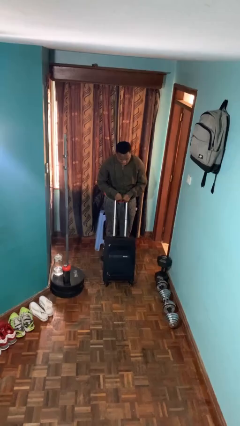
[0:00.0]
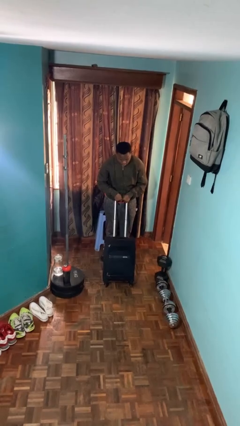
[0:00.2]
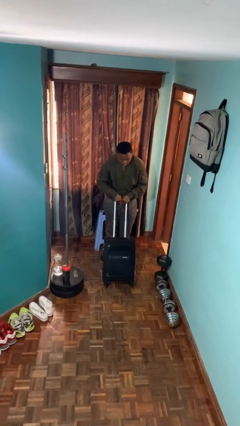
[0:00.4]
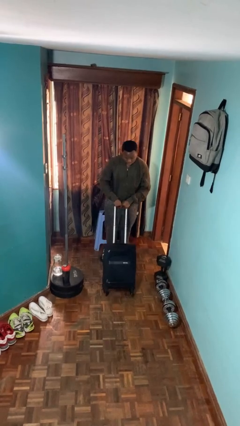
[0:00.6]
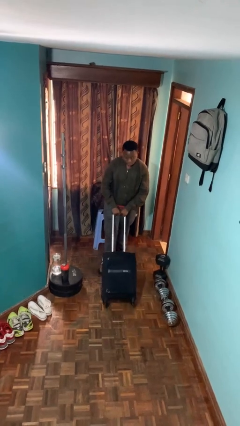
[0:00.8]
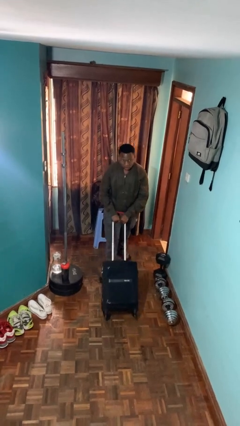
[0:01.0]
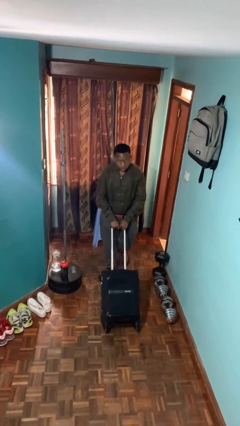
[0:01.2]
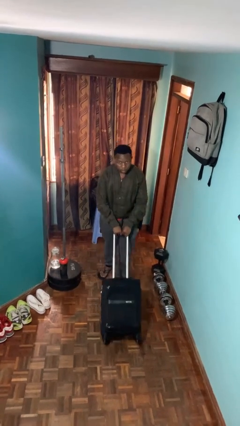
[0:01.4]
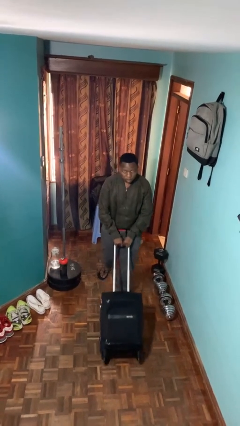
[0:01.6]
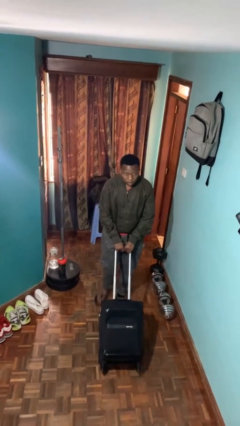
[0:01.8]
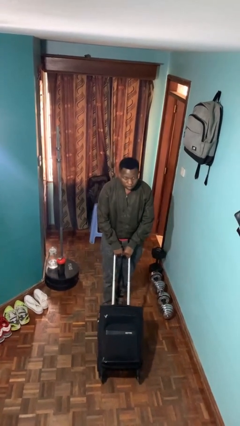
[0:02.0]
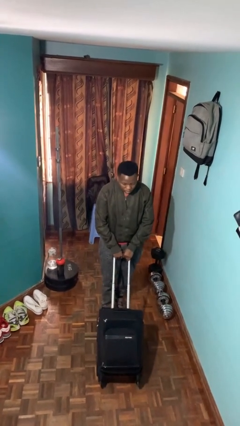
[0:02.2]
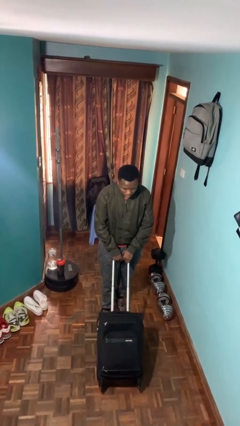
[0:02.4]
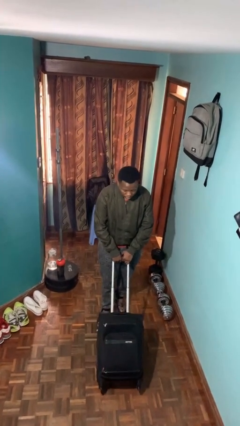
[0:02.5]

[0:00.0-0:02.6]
person pushes wheeled cart

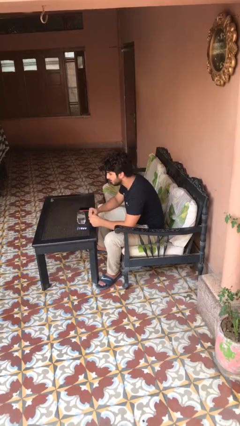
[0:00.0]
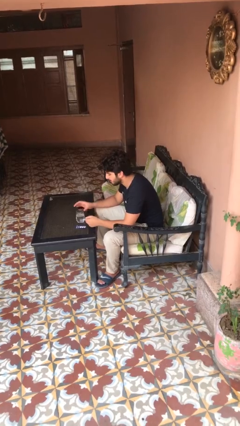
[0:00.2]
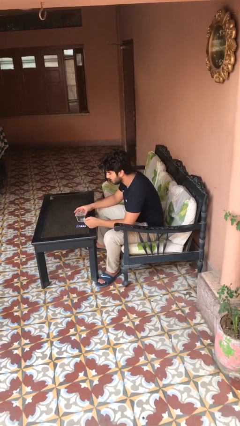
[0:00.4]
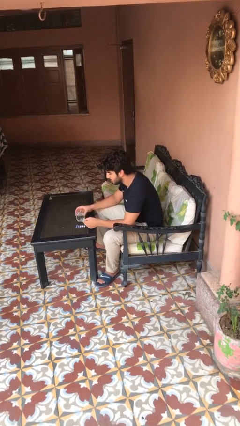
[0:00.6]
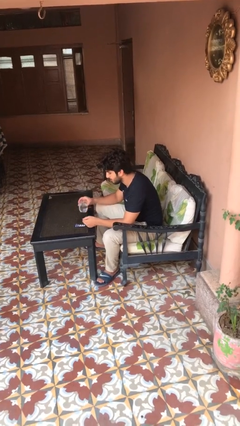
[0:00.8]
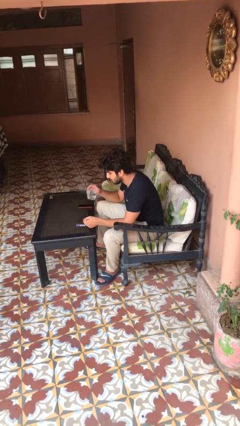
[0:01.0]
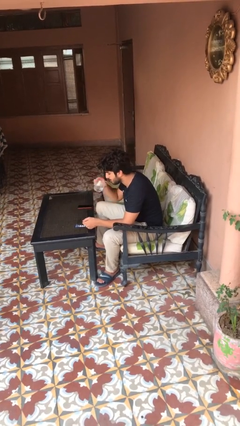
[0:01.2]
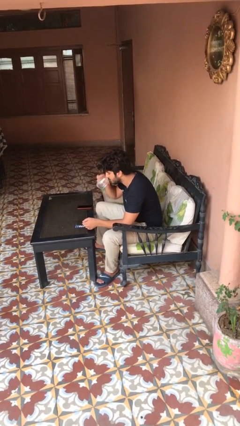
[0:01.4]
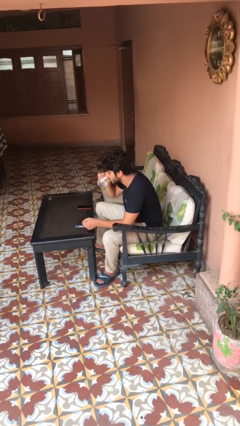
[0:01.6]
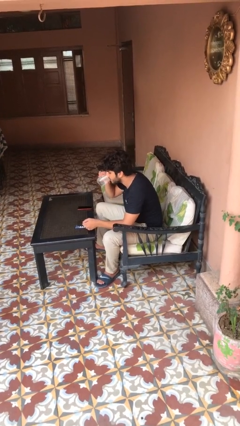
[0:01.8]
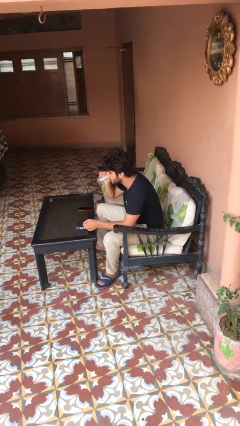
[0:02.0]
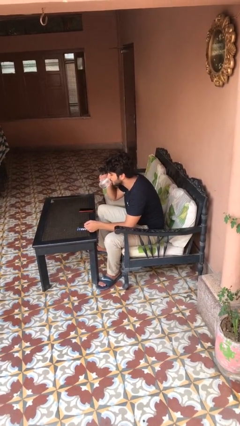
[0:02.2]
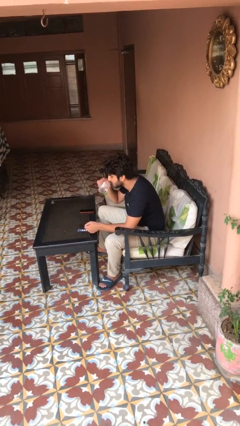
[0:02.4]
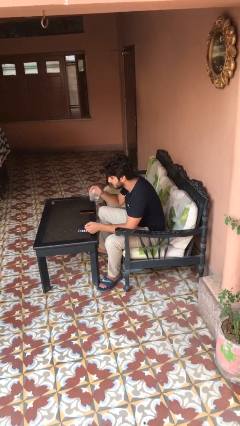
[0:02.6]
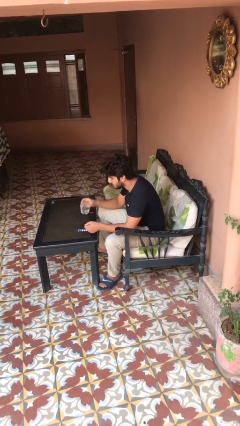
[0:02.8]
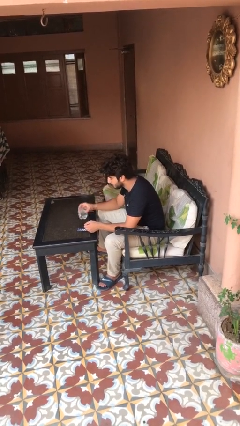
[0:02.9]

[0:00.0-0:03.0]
person drinks from cup

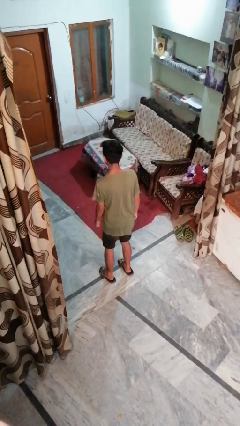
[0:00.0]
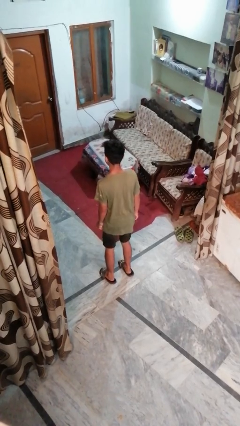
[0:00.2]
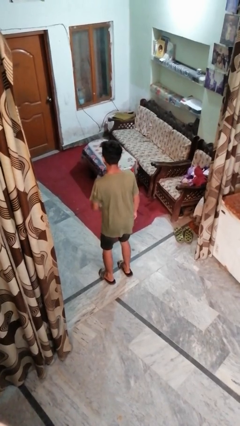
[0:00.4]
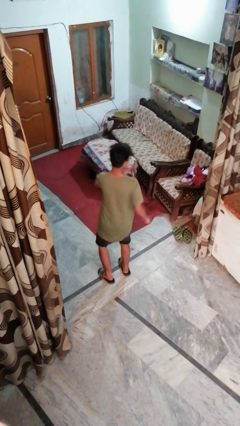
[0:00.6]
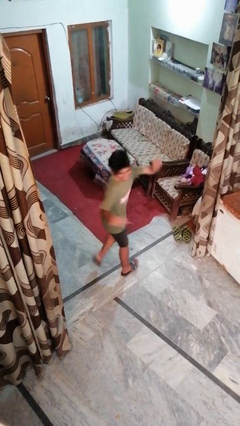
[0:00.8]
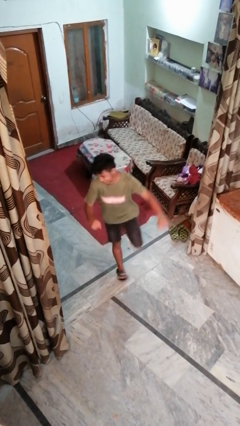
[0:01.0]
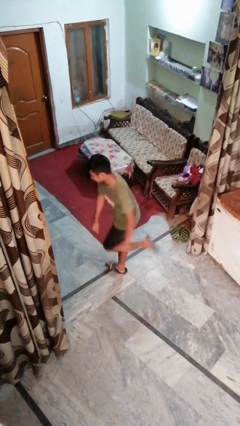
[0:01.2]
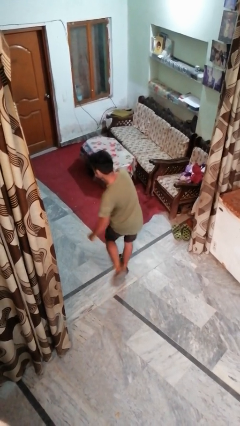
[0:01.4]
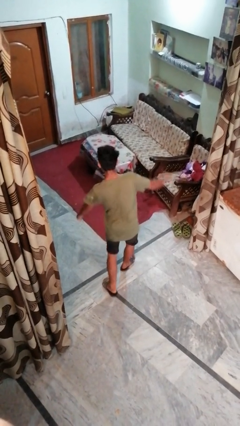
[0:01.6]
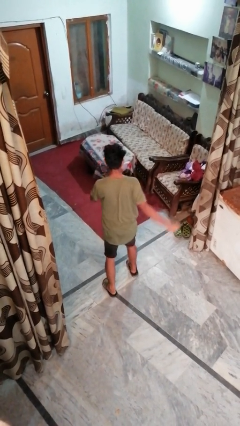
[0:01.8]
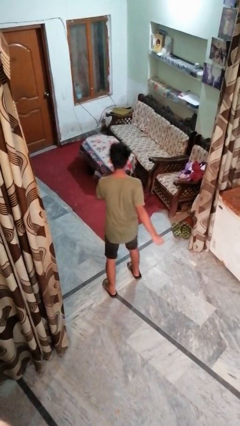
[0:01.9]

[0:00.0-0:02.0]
person twirls

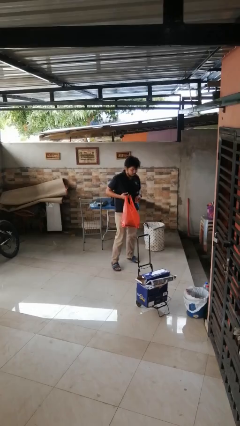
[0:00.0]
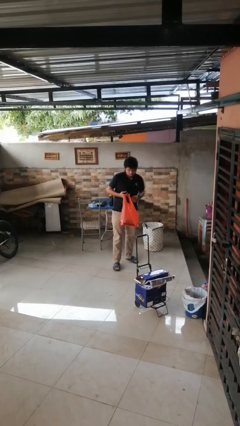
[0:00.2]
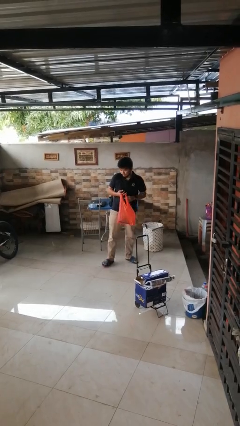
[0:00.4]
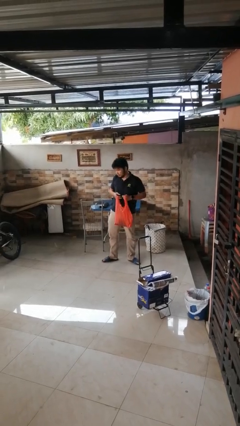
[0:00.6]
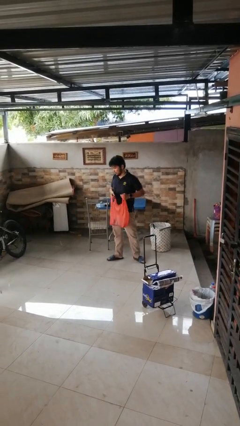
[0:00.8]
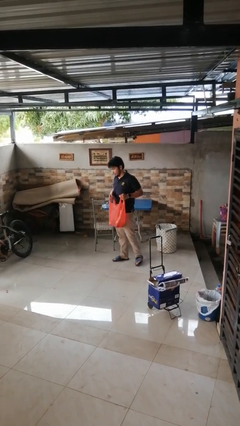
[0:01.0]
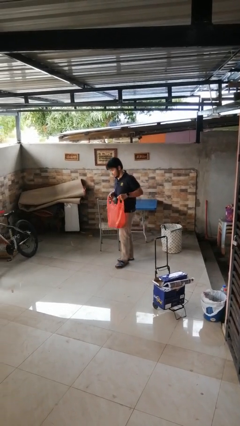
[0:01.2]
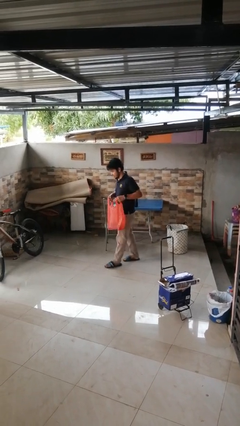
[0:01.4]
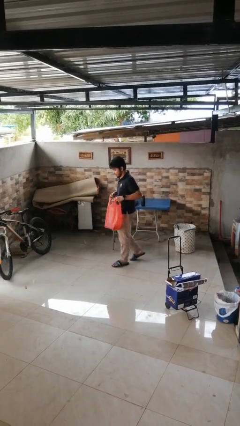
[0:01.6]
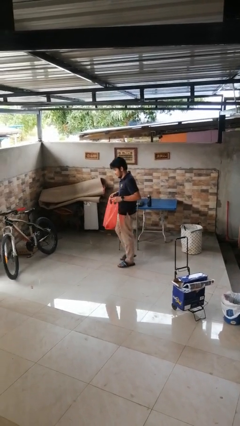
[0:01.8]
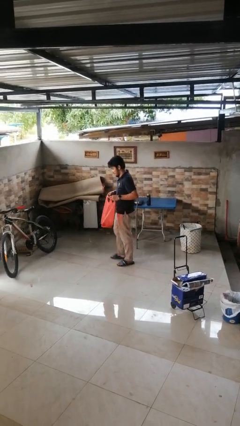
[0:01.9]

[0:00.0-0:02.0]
person carries groceries

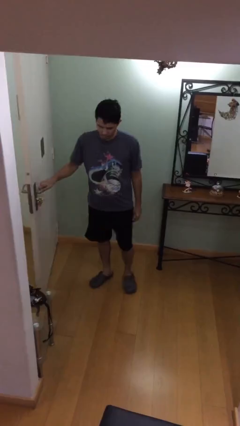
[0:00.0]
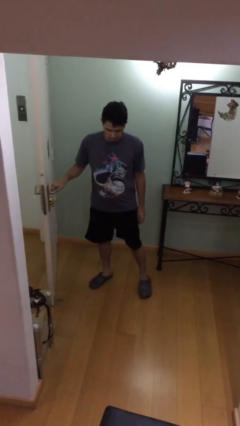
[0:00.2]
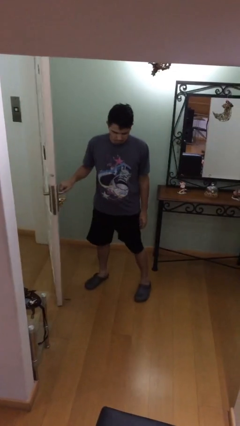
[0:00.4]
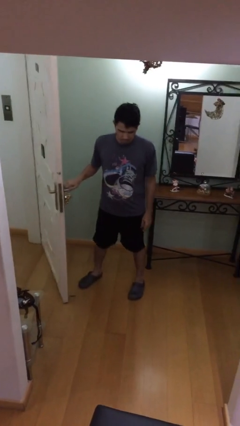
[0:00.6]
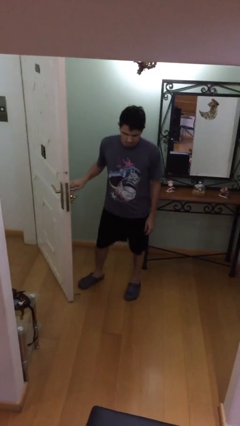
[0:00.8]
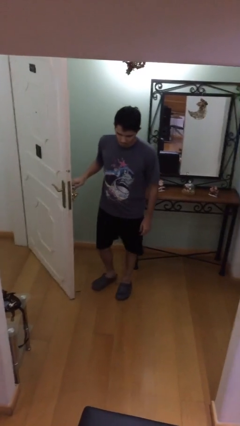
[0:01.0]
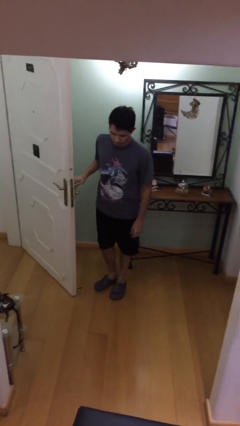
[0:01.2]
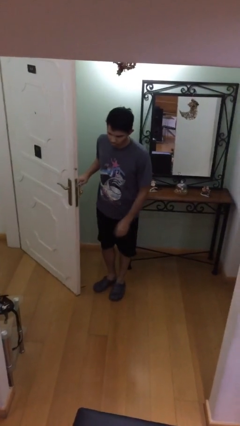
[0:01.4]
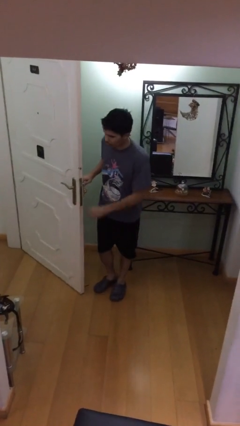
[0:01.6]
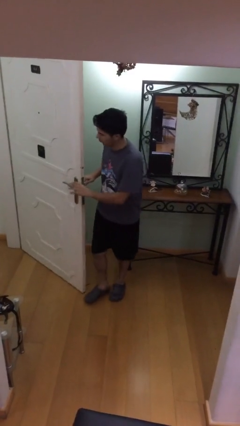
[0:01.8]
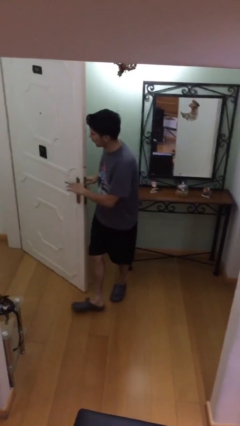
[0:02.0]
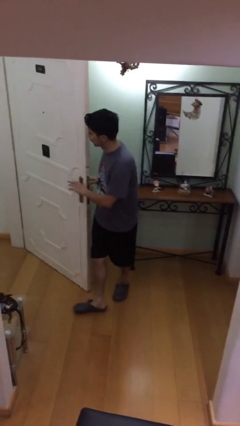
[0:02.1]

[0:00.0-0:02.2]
person opens facility door

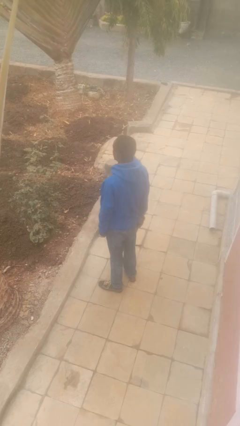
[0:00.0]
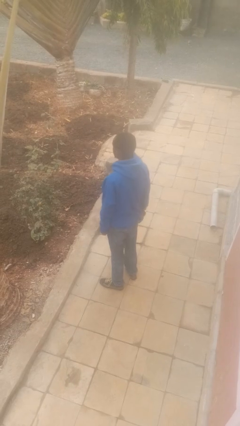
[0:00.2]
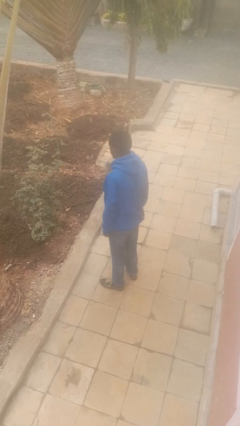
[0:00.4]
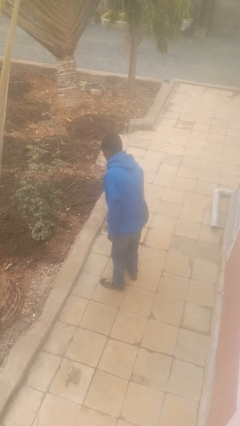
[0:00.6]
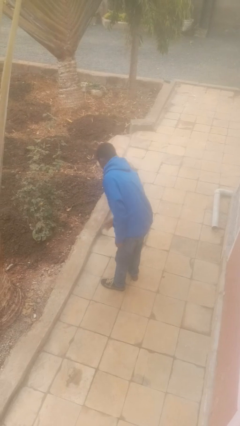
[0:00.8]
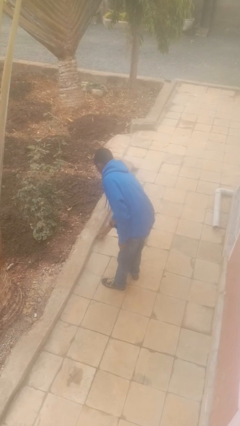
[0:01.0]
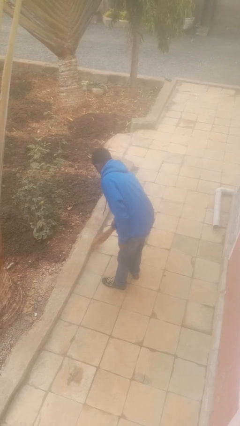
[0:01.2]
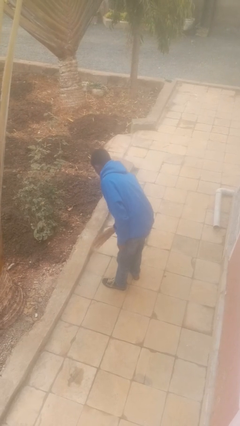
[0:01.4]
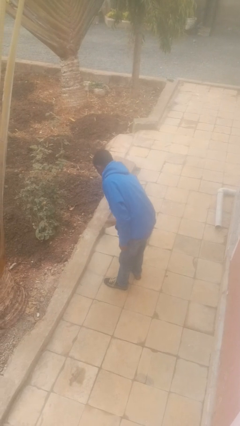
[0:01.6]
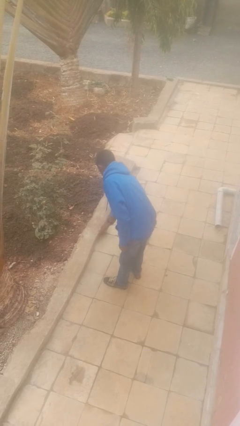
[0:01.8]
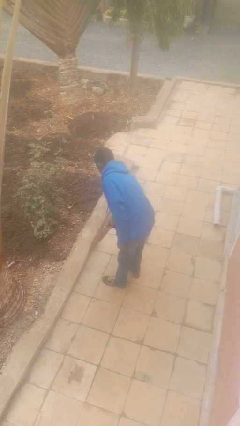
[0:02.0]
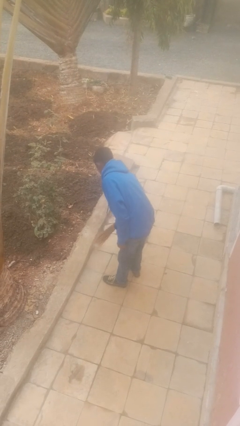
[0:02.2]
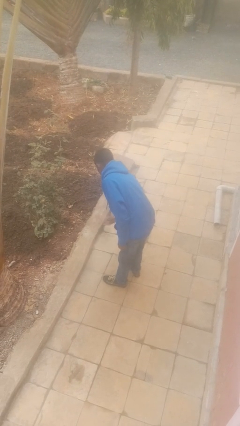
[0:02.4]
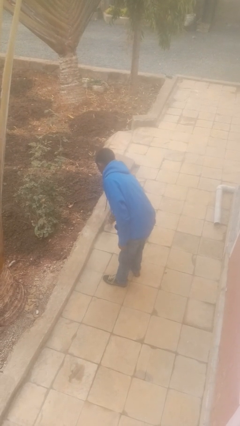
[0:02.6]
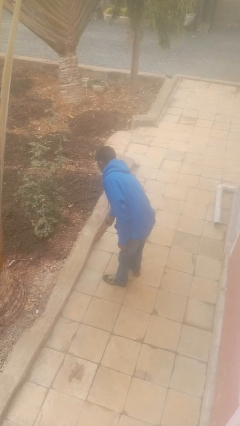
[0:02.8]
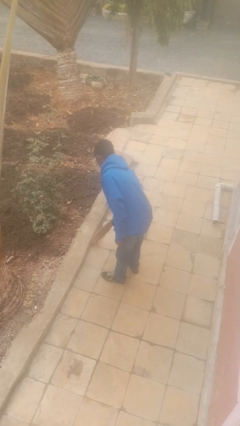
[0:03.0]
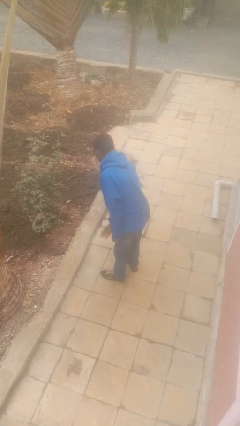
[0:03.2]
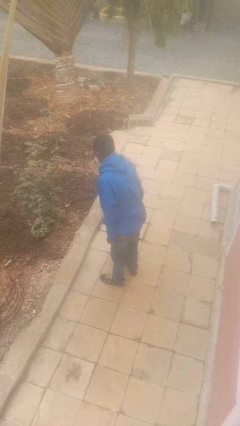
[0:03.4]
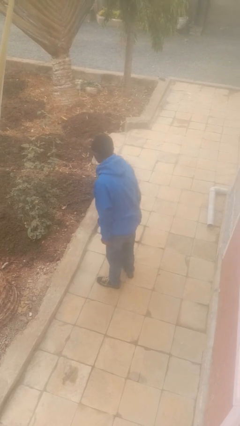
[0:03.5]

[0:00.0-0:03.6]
person sweeps floor

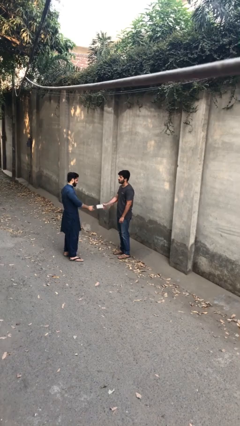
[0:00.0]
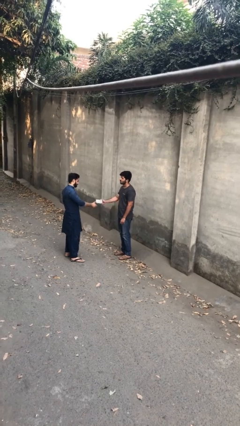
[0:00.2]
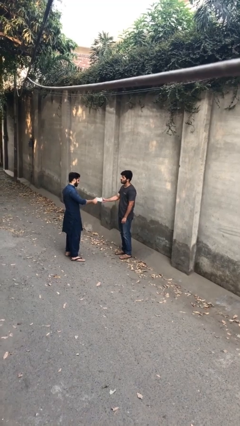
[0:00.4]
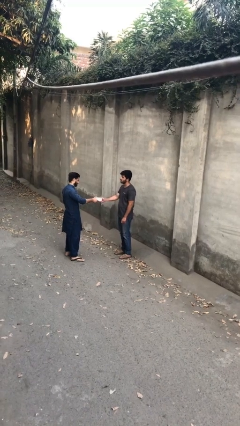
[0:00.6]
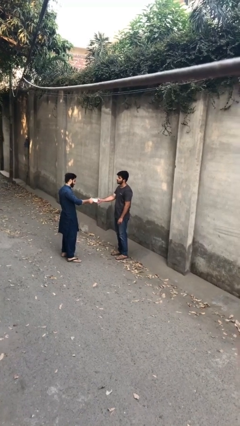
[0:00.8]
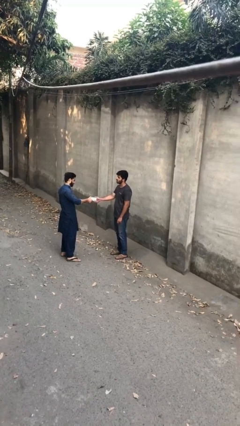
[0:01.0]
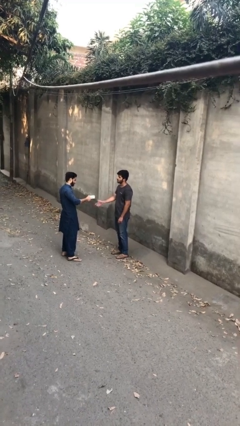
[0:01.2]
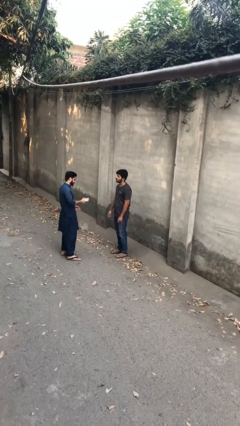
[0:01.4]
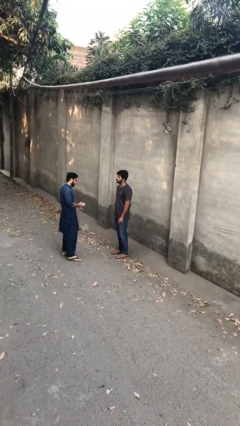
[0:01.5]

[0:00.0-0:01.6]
person transfers object to person

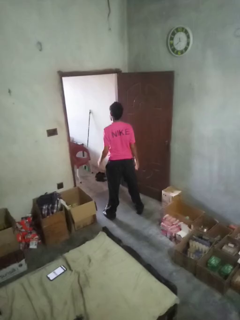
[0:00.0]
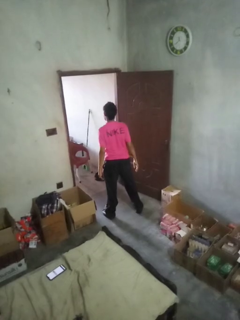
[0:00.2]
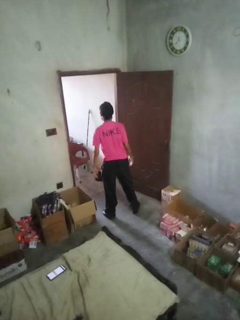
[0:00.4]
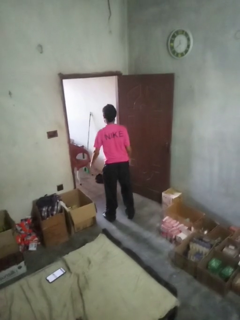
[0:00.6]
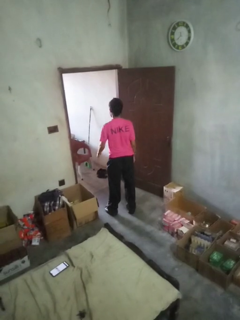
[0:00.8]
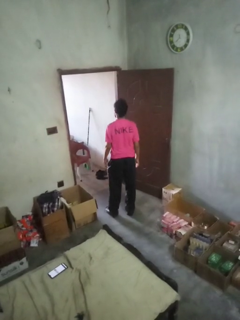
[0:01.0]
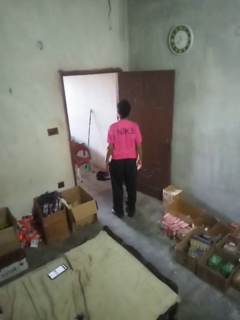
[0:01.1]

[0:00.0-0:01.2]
person stretches arms to side
